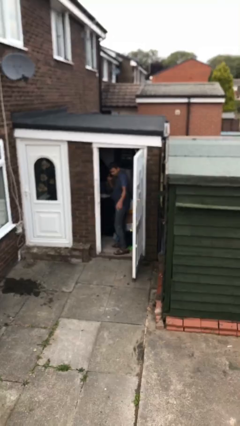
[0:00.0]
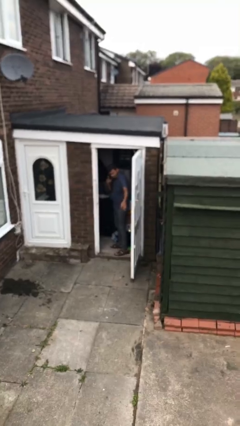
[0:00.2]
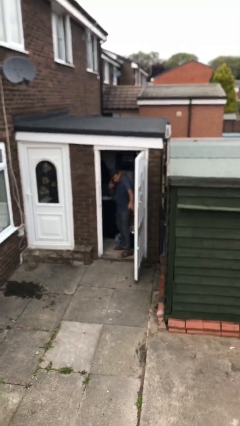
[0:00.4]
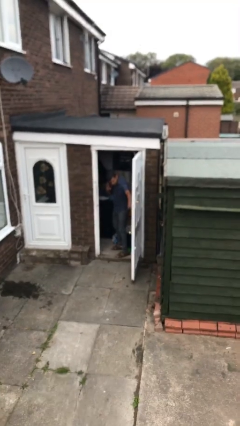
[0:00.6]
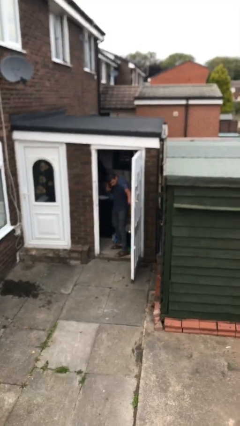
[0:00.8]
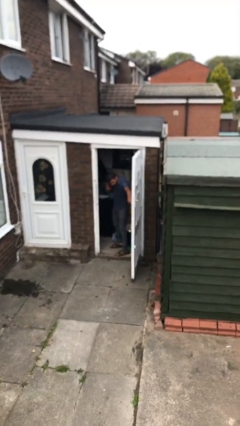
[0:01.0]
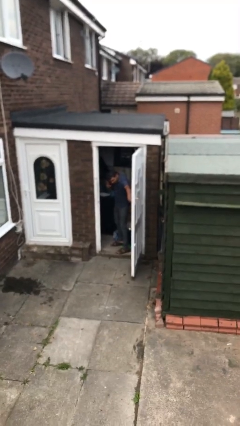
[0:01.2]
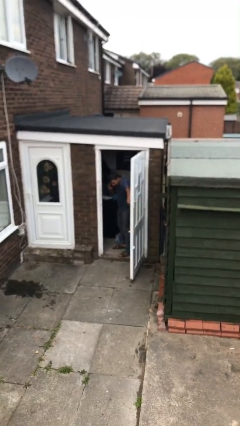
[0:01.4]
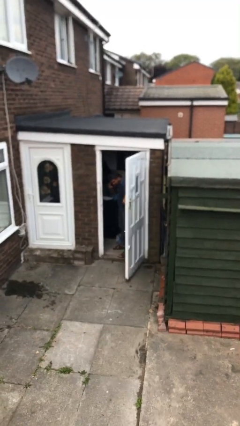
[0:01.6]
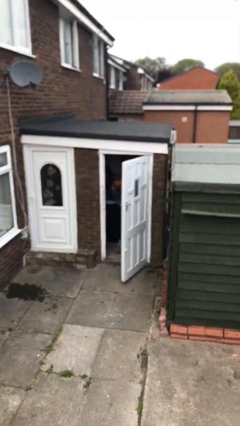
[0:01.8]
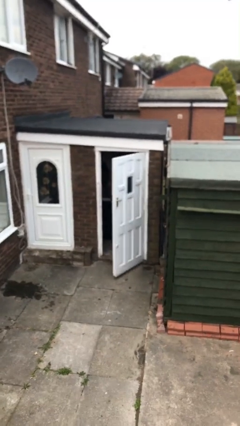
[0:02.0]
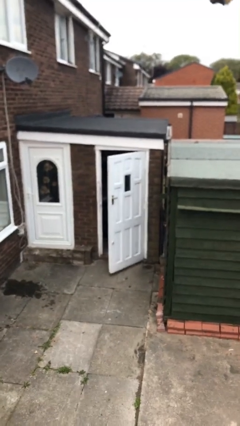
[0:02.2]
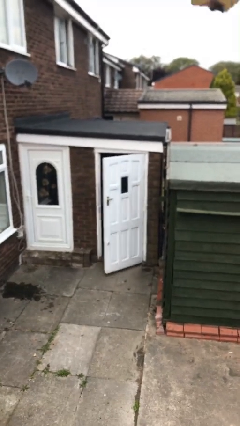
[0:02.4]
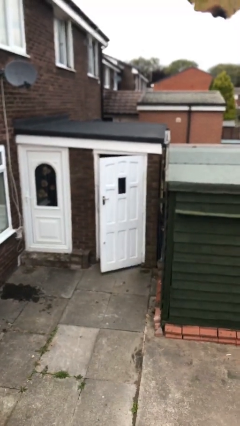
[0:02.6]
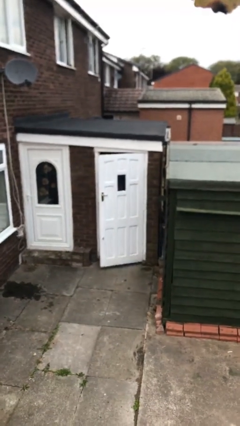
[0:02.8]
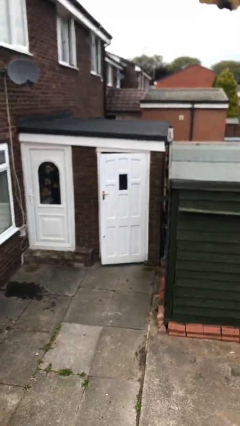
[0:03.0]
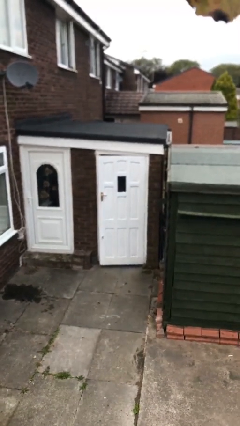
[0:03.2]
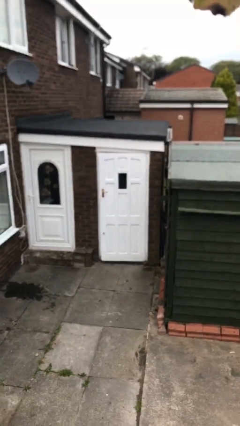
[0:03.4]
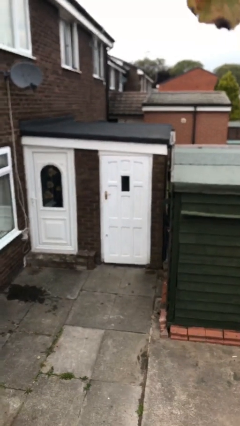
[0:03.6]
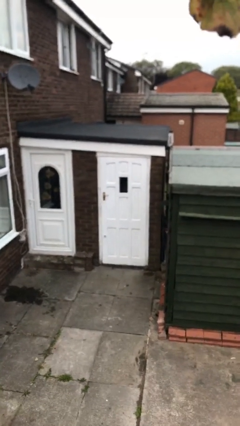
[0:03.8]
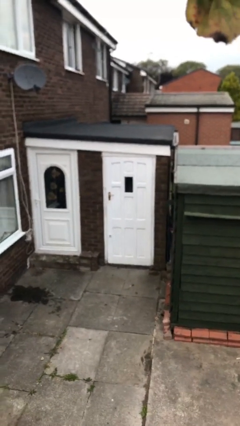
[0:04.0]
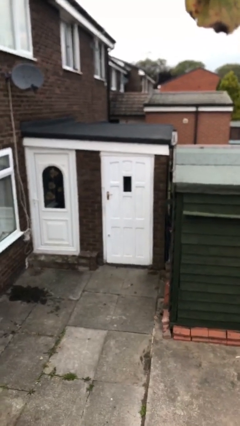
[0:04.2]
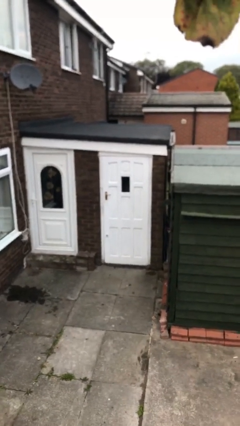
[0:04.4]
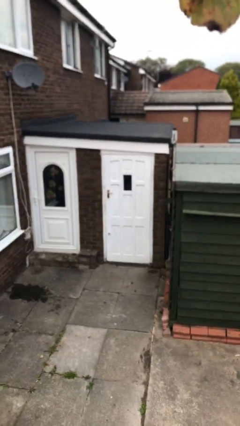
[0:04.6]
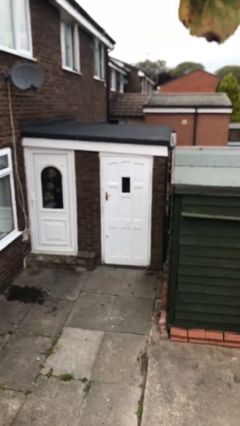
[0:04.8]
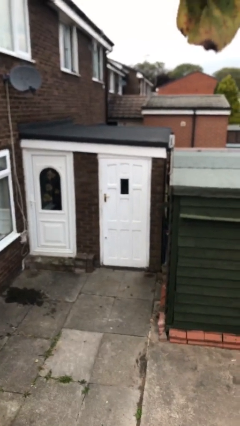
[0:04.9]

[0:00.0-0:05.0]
person closes facility door

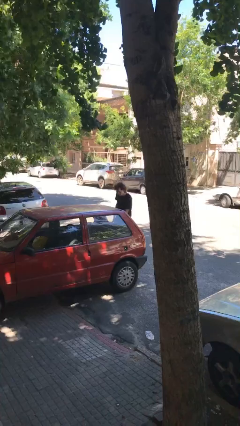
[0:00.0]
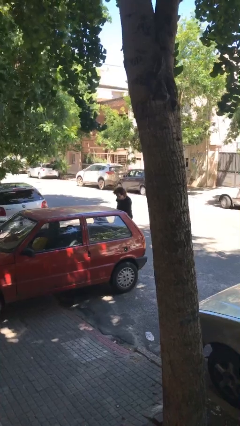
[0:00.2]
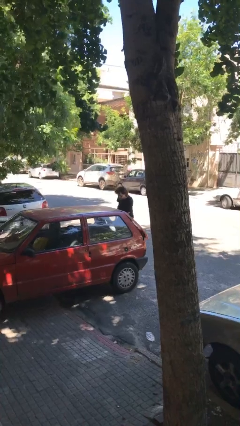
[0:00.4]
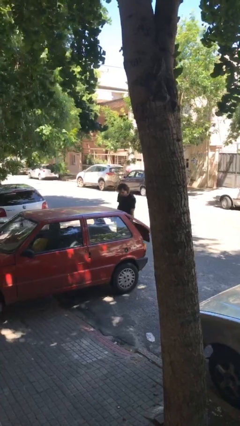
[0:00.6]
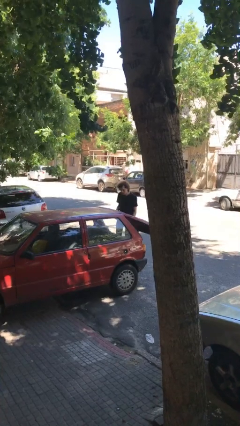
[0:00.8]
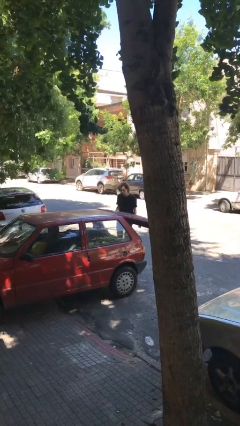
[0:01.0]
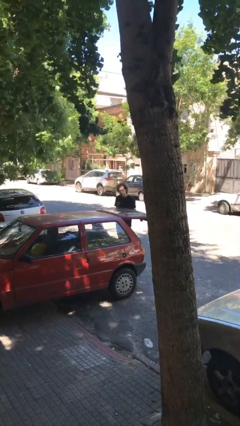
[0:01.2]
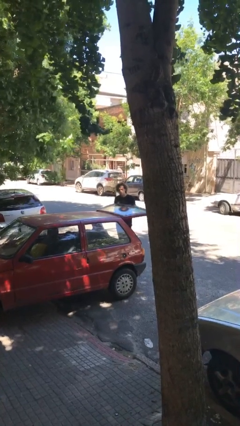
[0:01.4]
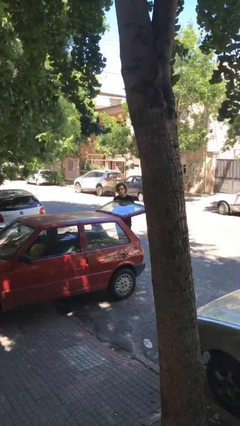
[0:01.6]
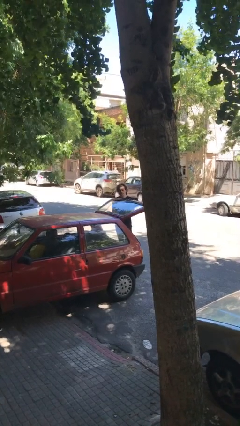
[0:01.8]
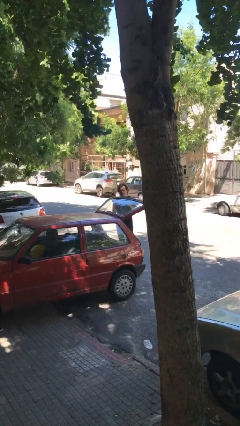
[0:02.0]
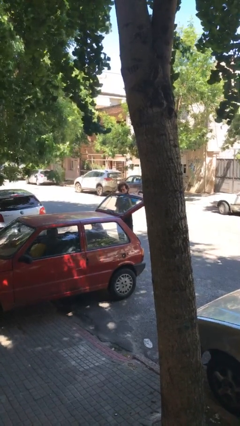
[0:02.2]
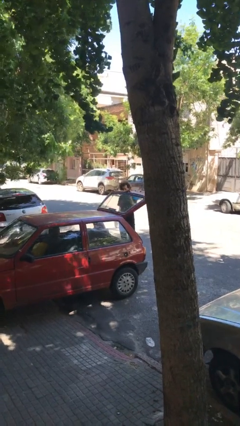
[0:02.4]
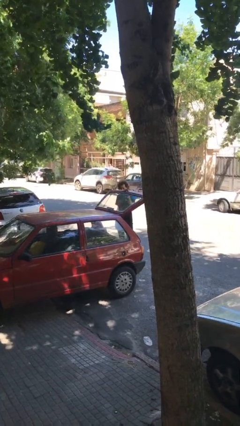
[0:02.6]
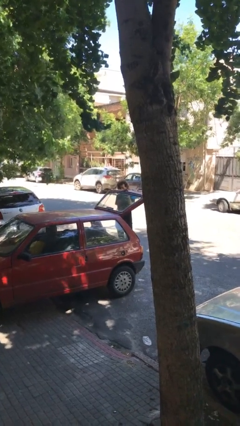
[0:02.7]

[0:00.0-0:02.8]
person opens car trunk

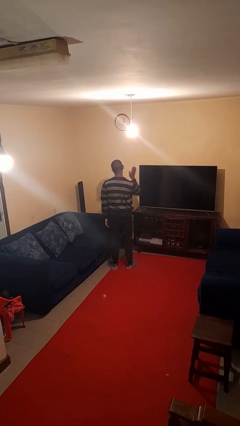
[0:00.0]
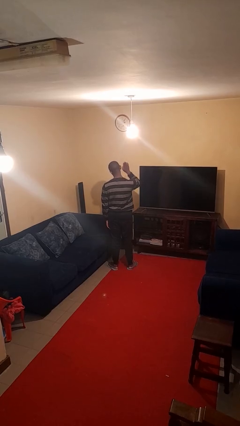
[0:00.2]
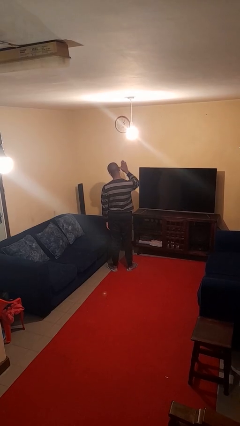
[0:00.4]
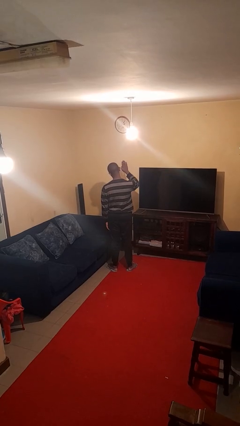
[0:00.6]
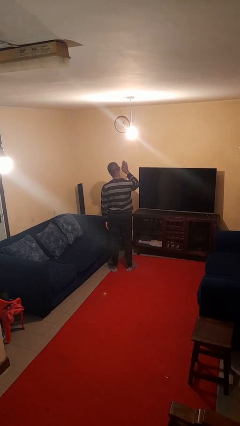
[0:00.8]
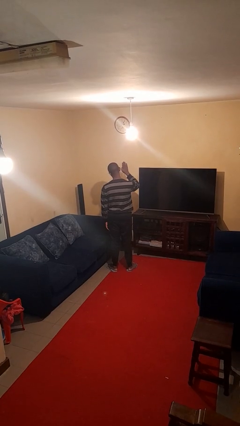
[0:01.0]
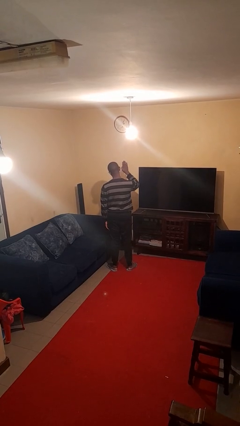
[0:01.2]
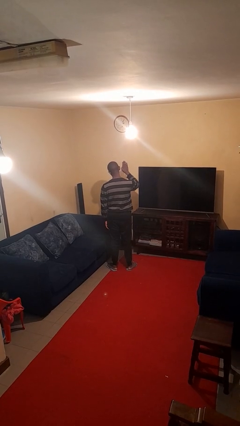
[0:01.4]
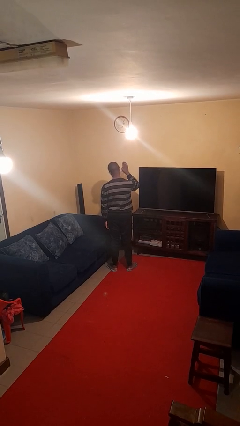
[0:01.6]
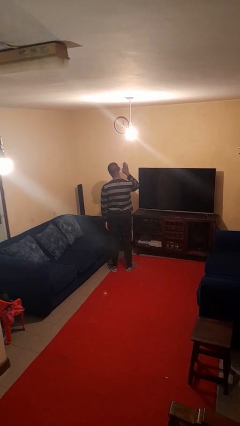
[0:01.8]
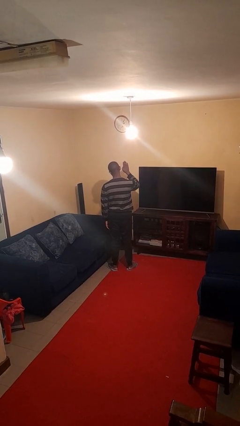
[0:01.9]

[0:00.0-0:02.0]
person gestures stop

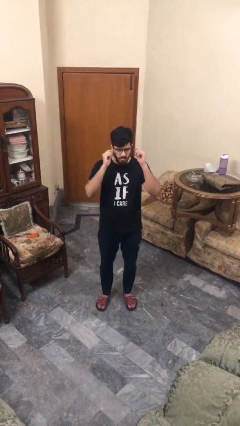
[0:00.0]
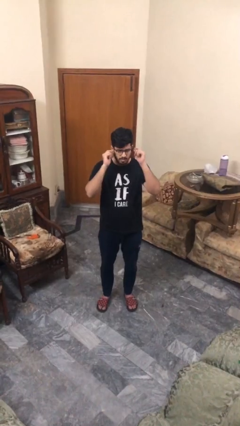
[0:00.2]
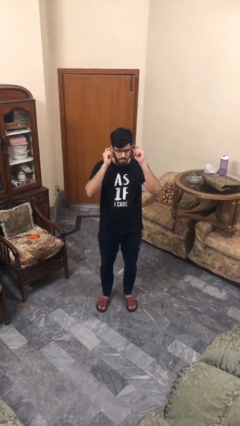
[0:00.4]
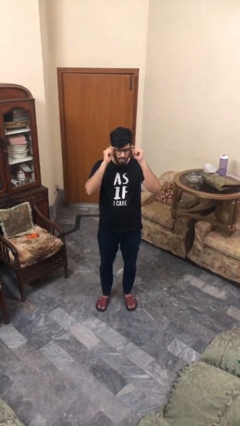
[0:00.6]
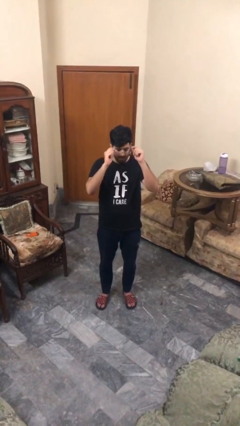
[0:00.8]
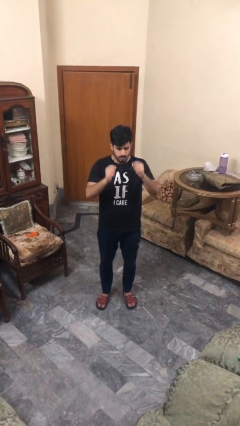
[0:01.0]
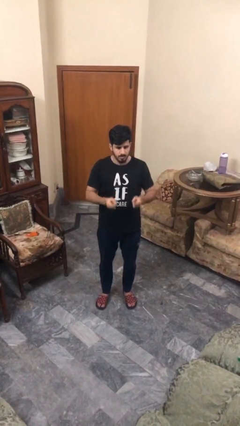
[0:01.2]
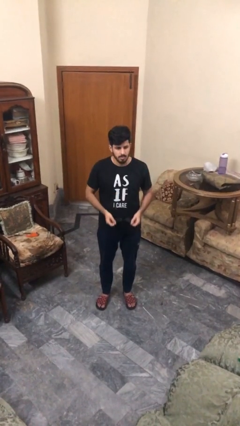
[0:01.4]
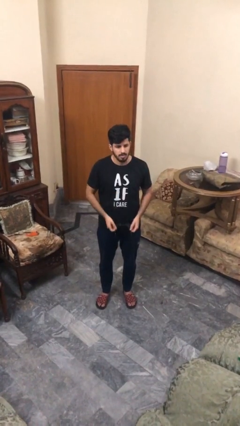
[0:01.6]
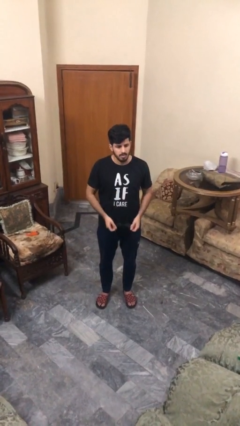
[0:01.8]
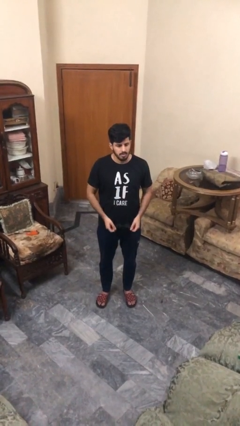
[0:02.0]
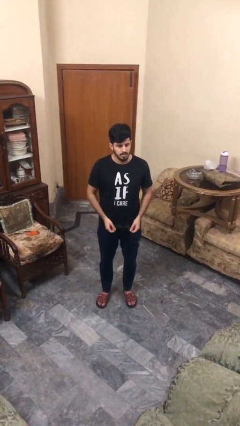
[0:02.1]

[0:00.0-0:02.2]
person takes off glasses

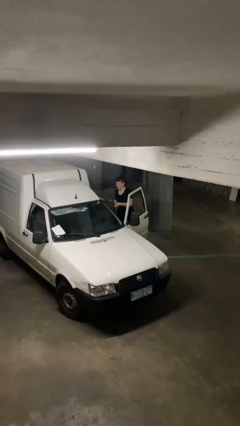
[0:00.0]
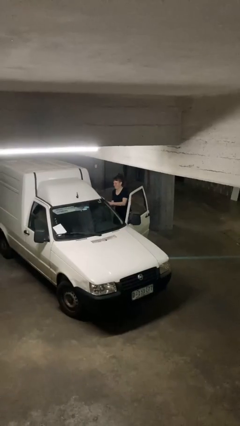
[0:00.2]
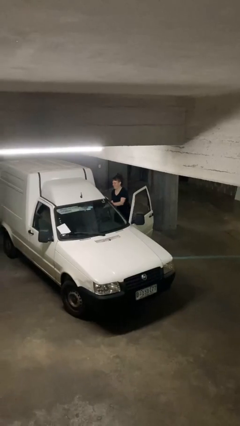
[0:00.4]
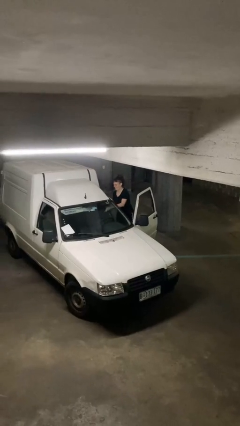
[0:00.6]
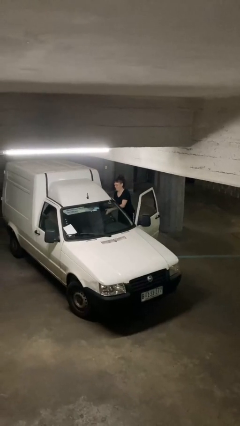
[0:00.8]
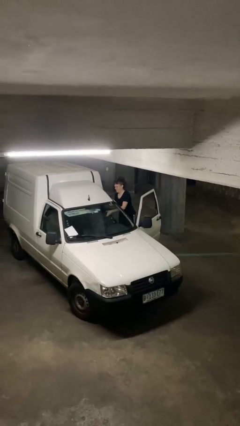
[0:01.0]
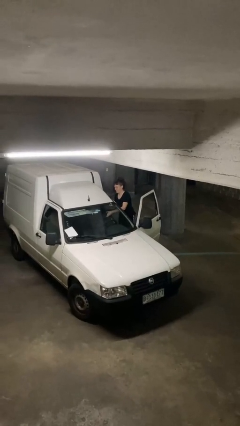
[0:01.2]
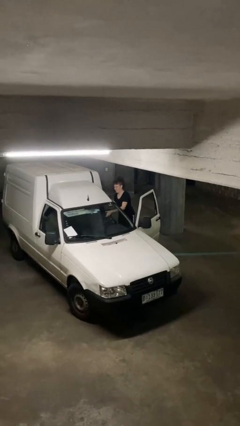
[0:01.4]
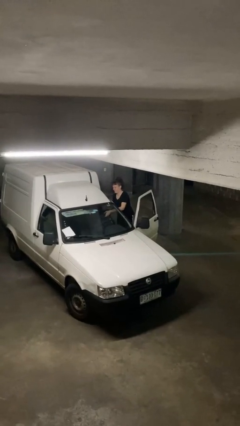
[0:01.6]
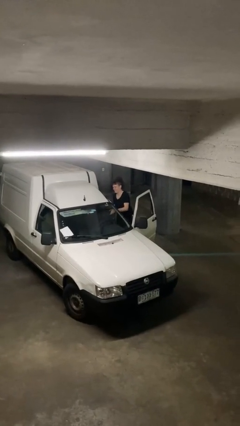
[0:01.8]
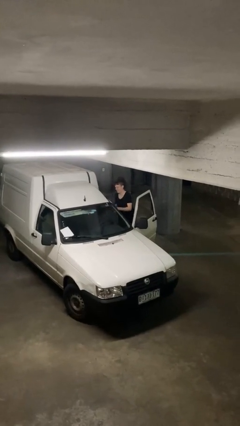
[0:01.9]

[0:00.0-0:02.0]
person loads car

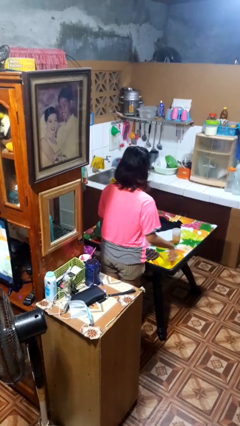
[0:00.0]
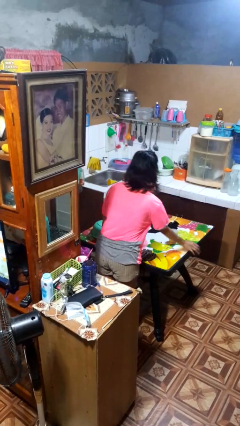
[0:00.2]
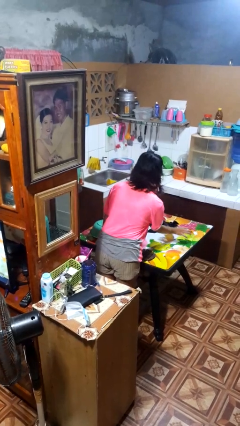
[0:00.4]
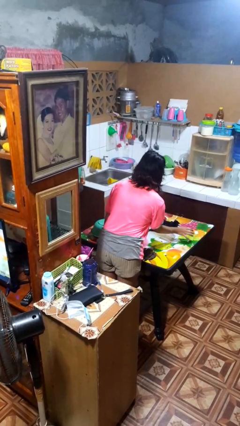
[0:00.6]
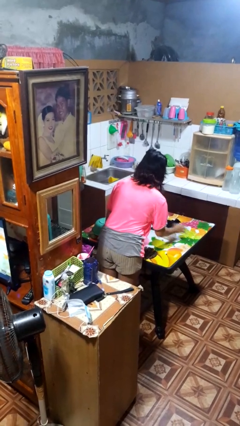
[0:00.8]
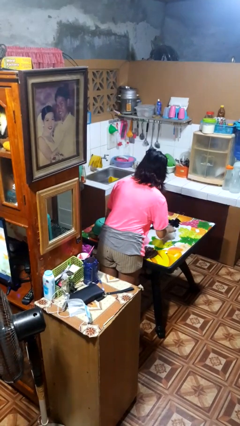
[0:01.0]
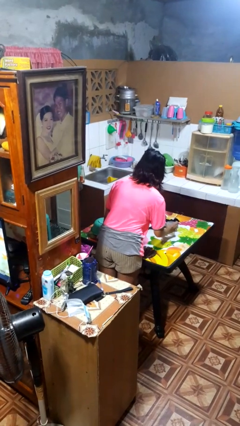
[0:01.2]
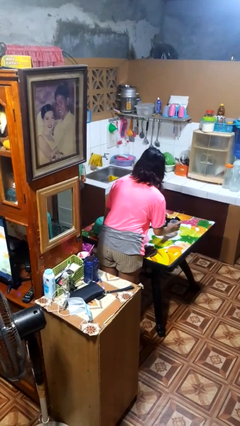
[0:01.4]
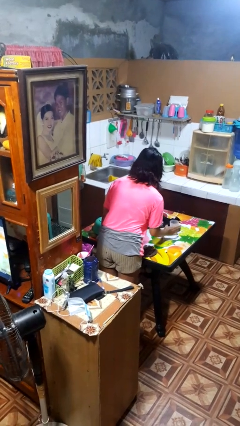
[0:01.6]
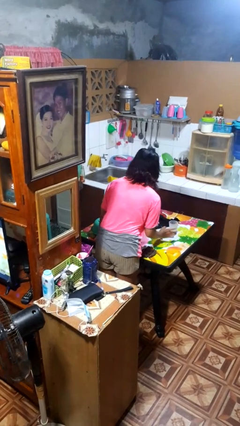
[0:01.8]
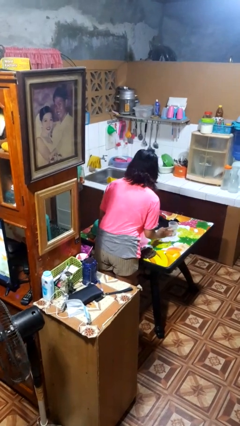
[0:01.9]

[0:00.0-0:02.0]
person spills on table

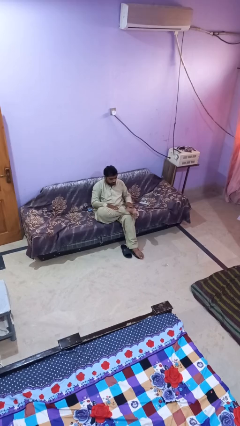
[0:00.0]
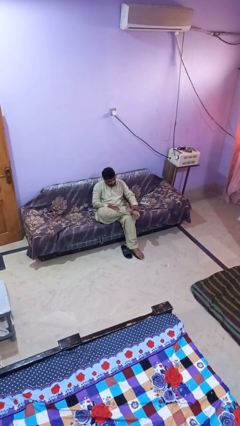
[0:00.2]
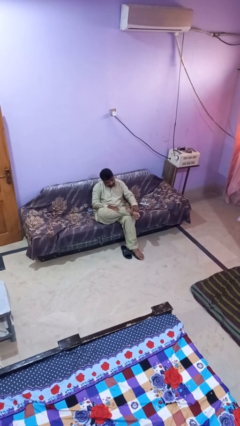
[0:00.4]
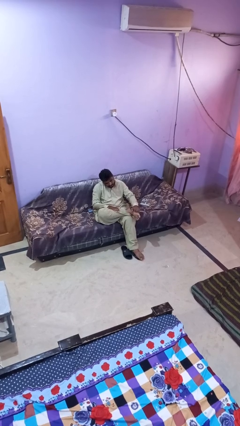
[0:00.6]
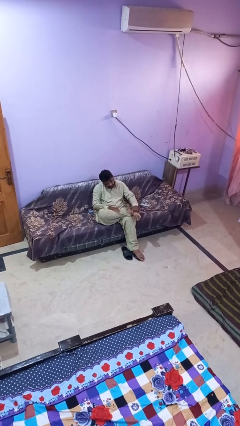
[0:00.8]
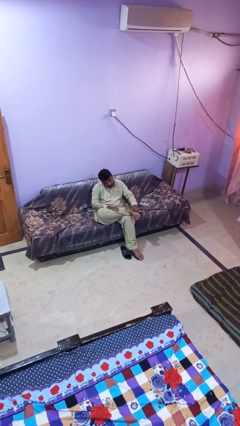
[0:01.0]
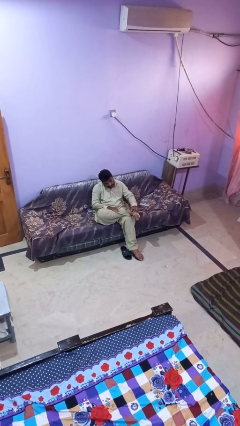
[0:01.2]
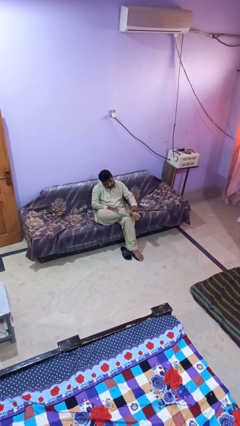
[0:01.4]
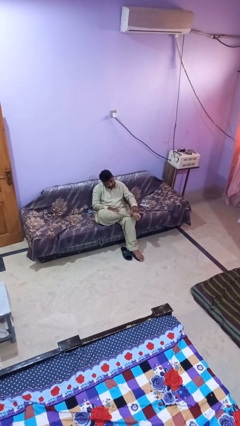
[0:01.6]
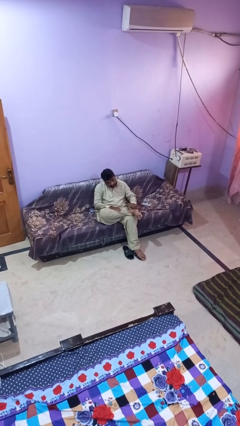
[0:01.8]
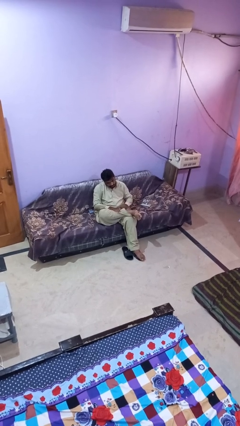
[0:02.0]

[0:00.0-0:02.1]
person rubs foot
